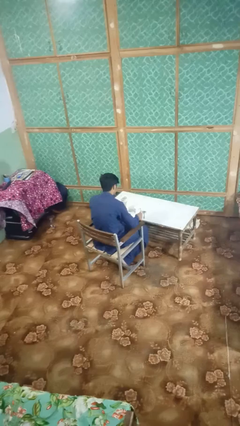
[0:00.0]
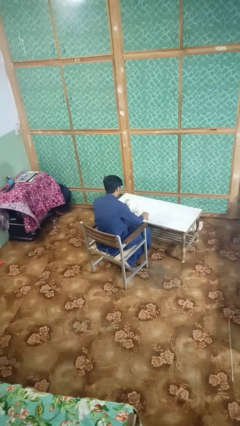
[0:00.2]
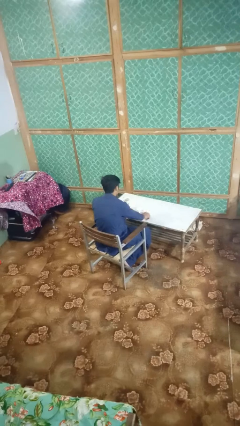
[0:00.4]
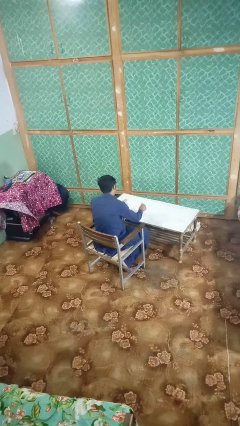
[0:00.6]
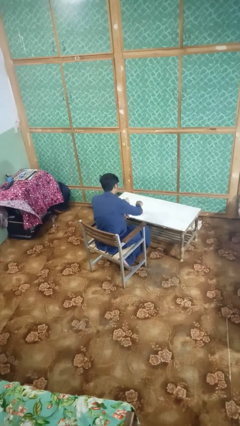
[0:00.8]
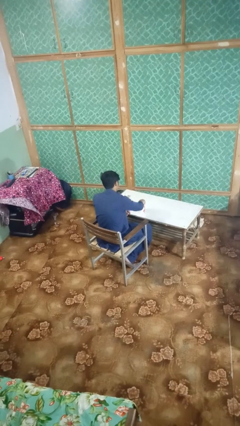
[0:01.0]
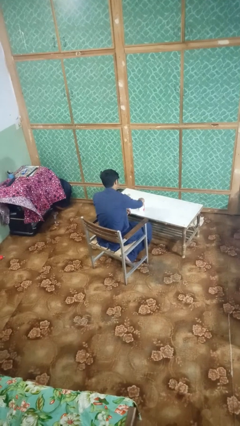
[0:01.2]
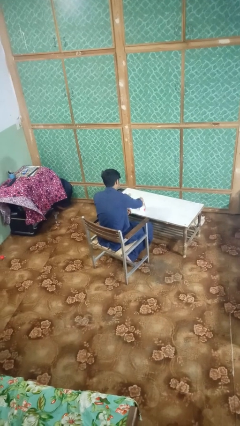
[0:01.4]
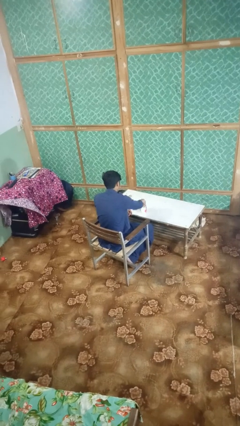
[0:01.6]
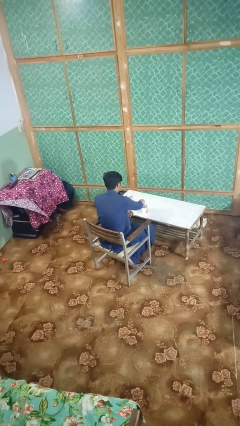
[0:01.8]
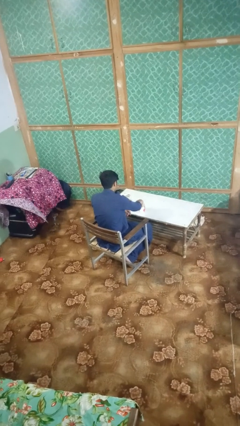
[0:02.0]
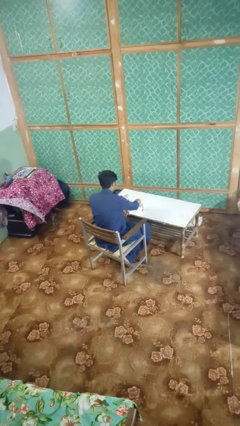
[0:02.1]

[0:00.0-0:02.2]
person stirs mug

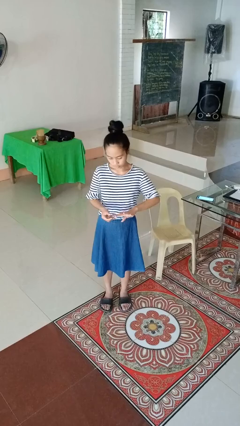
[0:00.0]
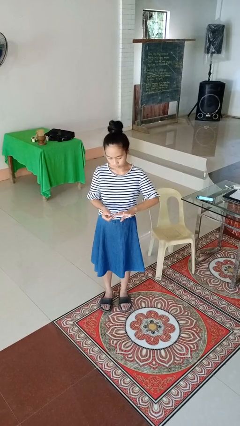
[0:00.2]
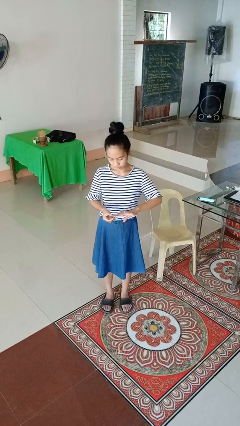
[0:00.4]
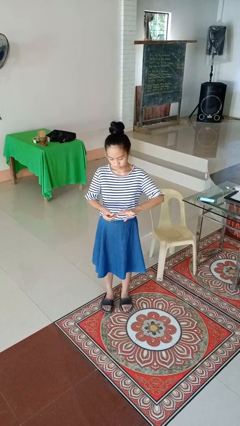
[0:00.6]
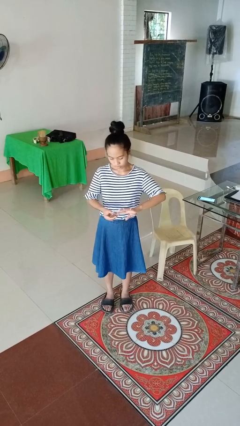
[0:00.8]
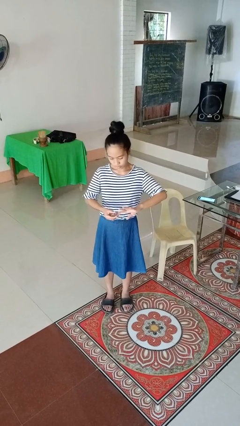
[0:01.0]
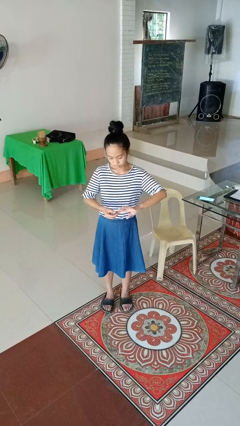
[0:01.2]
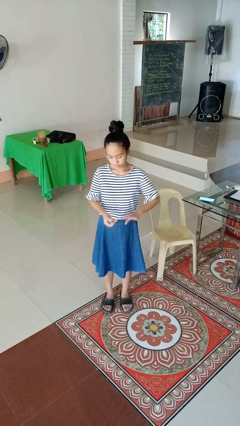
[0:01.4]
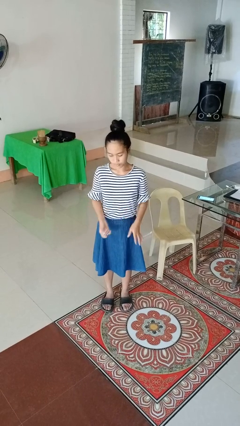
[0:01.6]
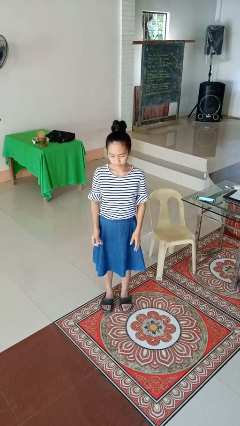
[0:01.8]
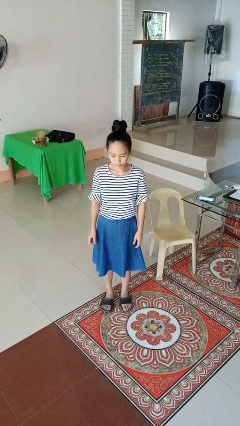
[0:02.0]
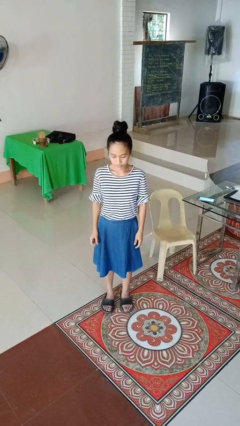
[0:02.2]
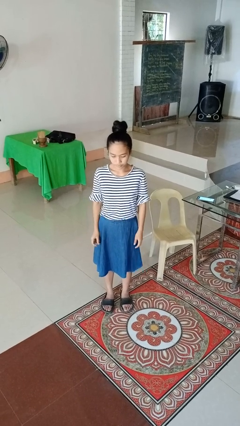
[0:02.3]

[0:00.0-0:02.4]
person clips fingernails

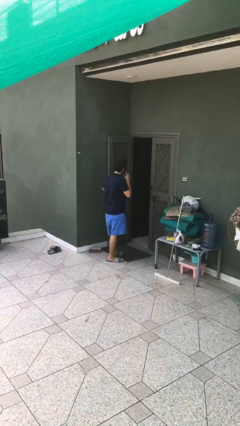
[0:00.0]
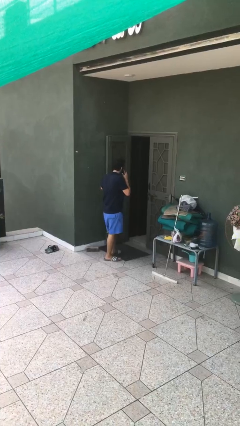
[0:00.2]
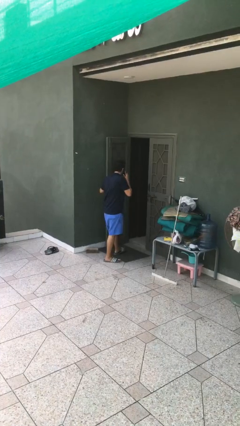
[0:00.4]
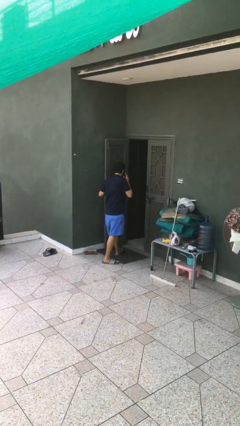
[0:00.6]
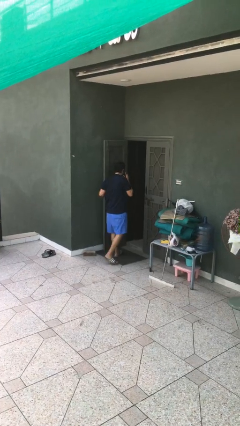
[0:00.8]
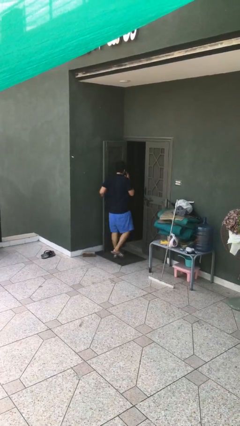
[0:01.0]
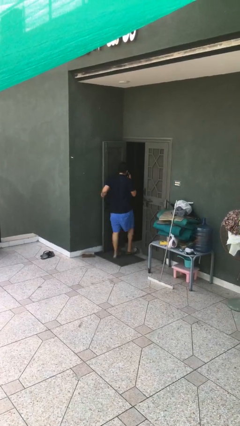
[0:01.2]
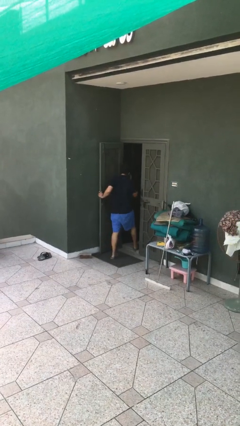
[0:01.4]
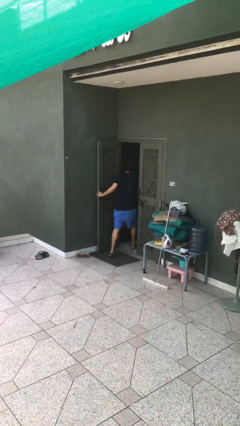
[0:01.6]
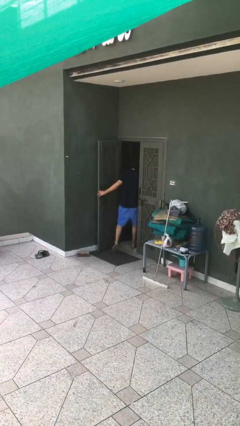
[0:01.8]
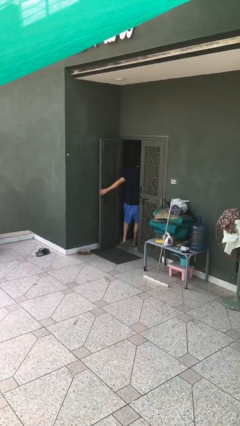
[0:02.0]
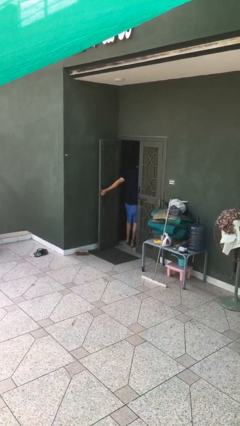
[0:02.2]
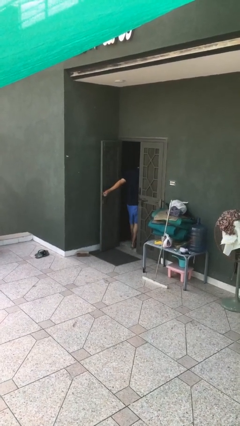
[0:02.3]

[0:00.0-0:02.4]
person exits scene through structure

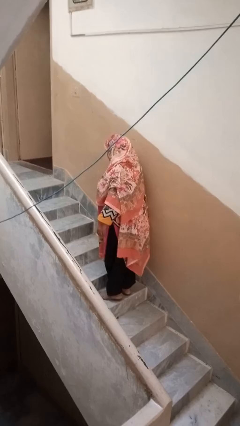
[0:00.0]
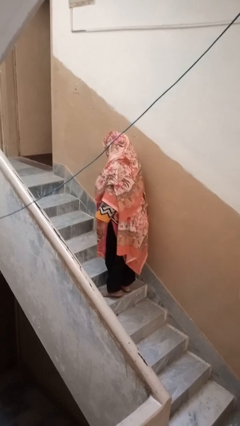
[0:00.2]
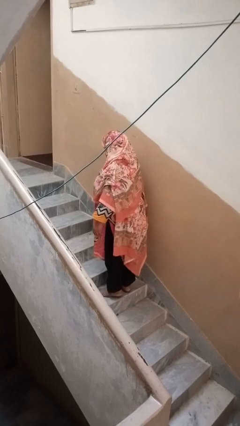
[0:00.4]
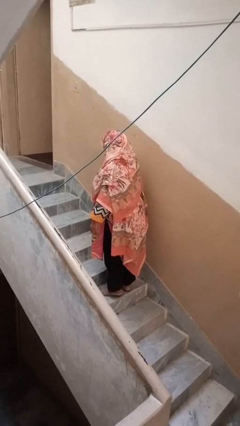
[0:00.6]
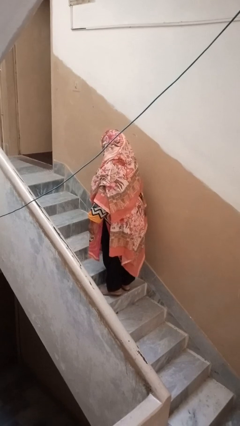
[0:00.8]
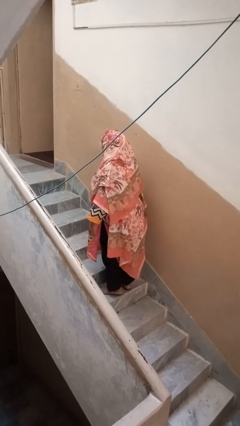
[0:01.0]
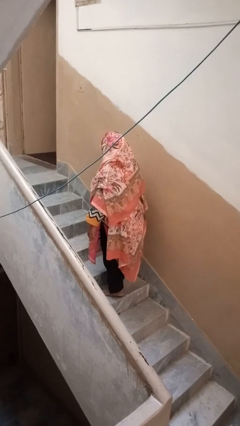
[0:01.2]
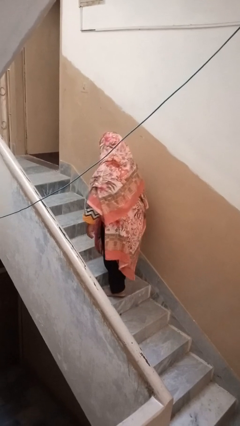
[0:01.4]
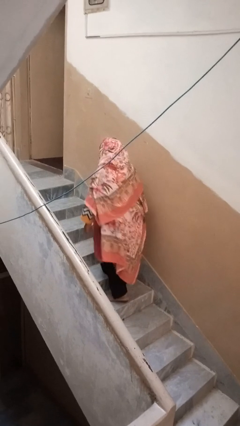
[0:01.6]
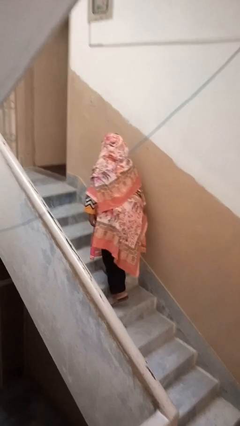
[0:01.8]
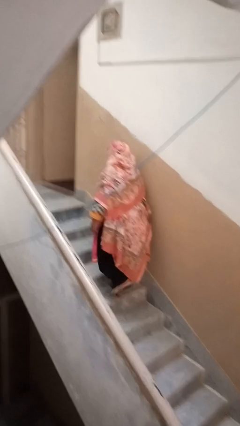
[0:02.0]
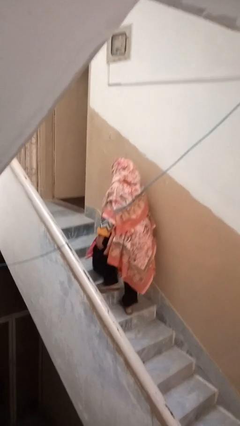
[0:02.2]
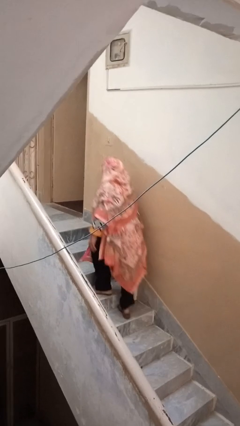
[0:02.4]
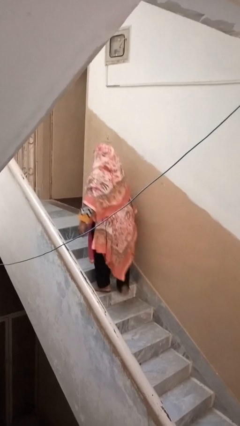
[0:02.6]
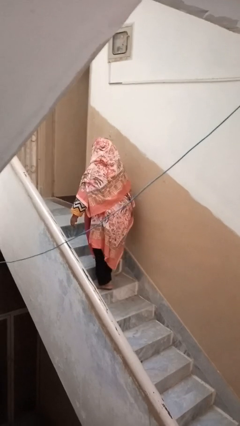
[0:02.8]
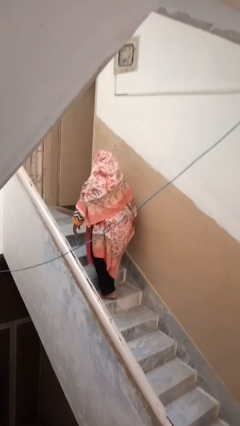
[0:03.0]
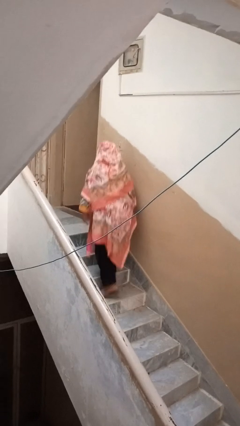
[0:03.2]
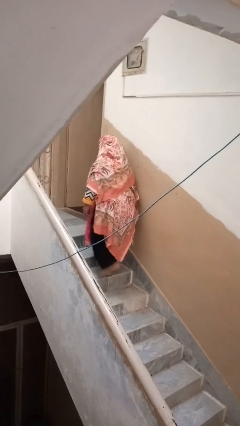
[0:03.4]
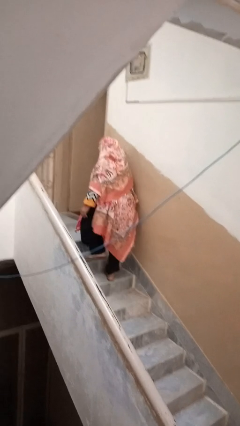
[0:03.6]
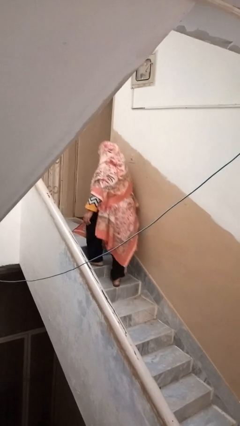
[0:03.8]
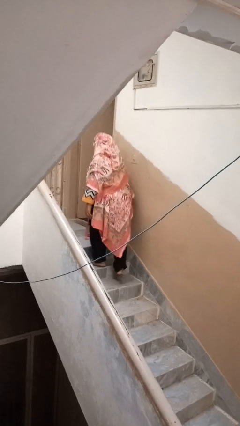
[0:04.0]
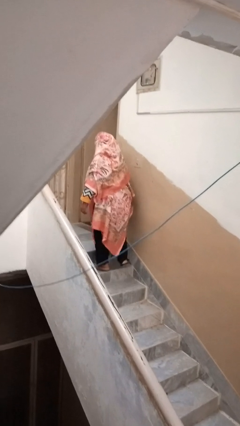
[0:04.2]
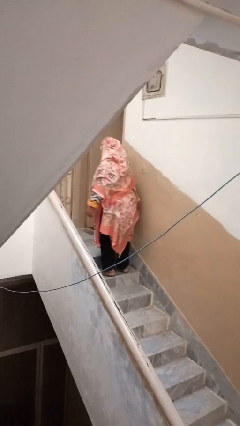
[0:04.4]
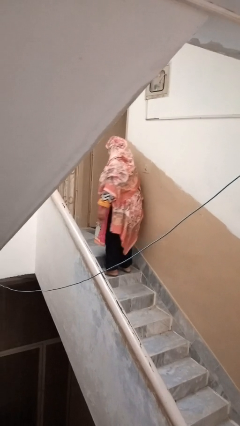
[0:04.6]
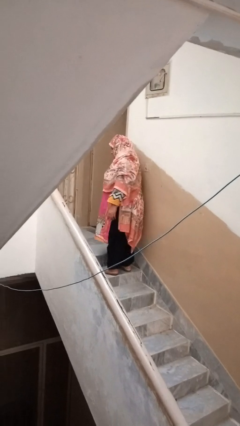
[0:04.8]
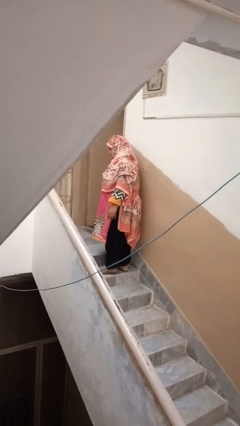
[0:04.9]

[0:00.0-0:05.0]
person climbs up stairs

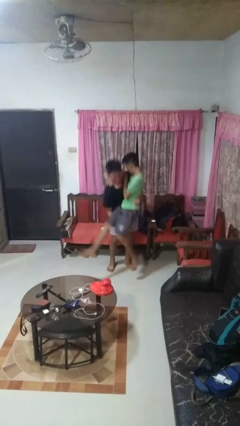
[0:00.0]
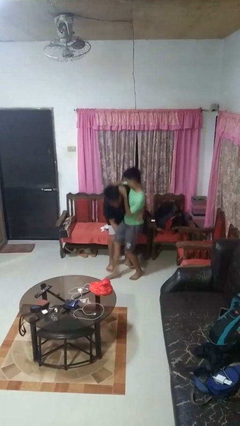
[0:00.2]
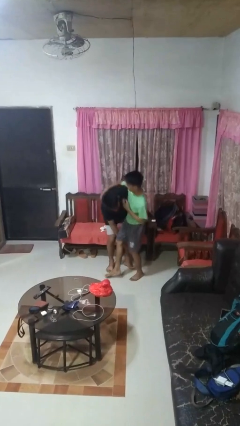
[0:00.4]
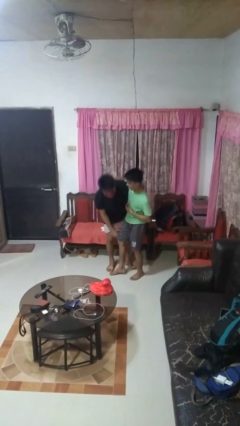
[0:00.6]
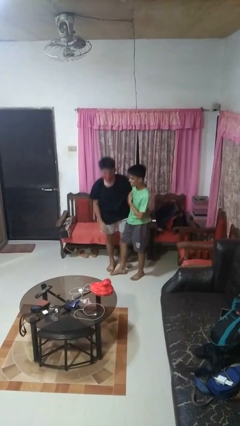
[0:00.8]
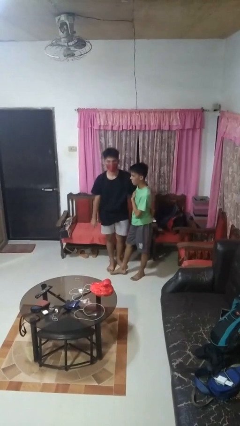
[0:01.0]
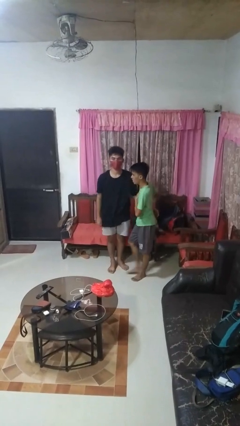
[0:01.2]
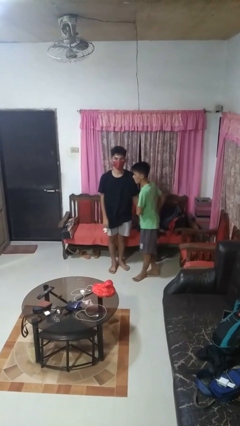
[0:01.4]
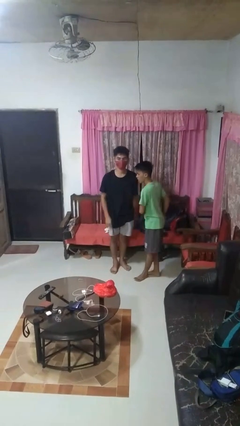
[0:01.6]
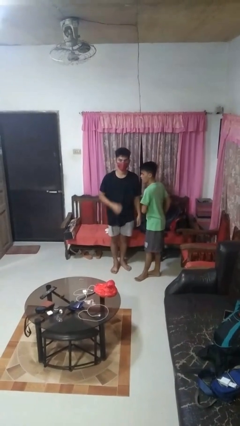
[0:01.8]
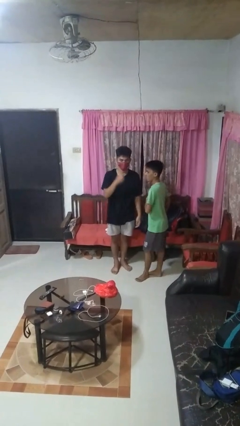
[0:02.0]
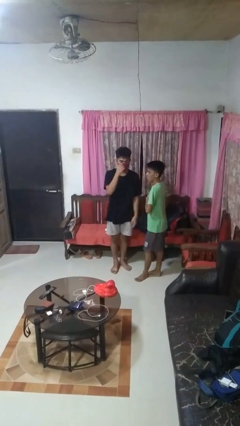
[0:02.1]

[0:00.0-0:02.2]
person puts down person

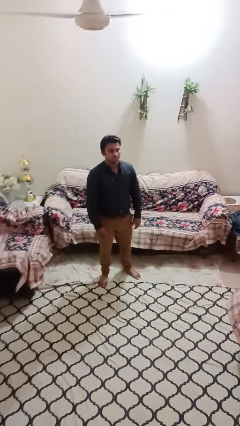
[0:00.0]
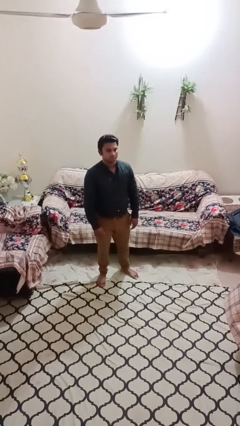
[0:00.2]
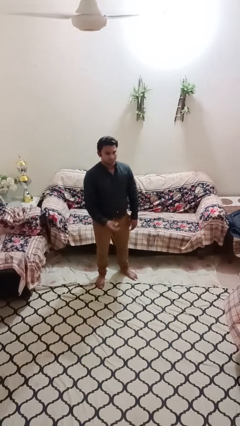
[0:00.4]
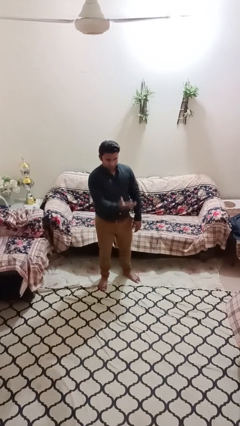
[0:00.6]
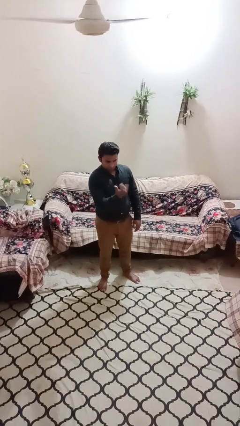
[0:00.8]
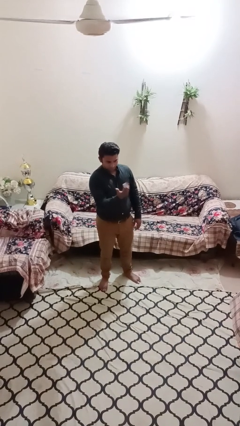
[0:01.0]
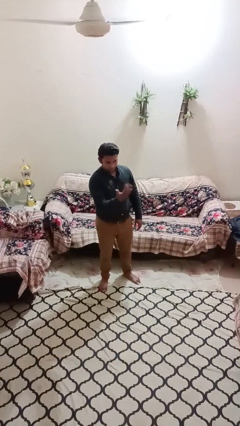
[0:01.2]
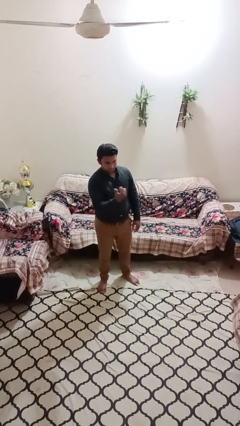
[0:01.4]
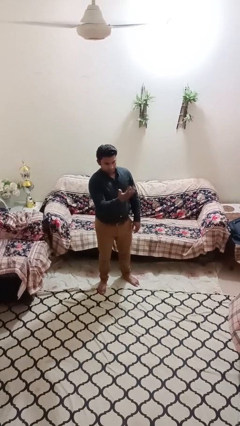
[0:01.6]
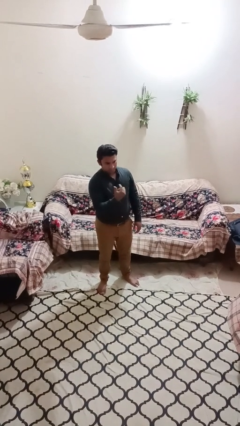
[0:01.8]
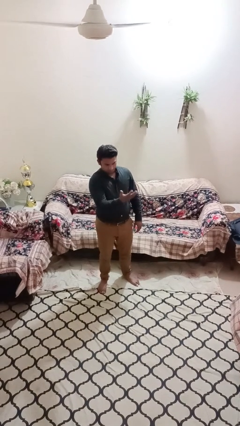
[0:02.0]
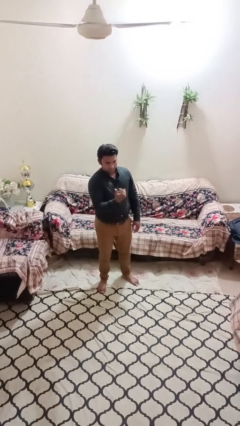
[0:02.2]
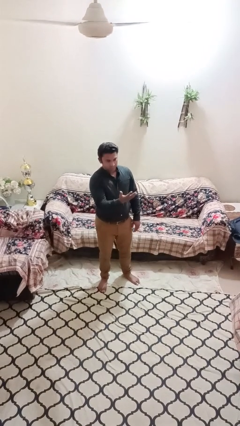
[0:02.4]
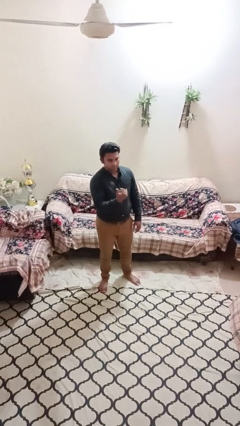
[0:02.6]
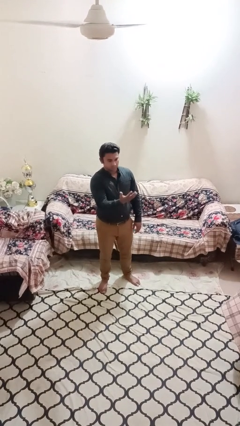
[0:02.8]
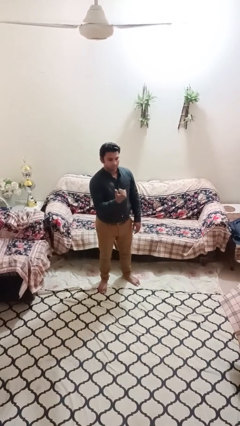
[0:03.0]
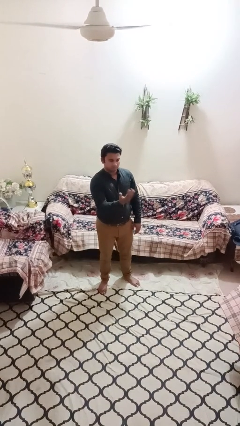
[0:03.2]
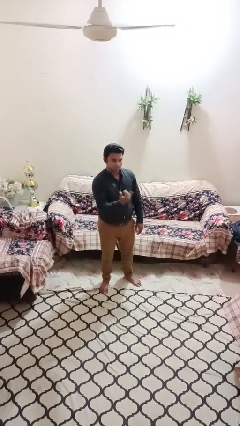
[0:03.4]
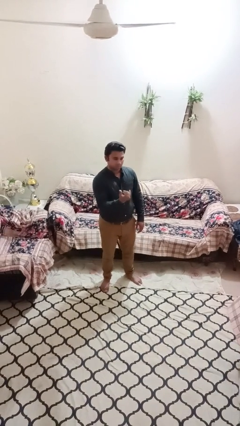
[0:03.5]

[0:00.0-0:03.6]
person gestures come here
